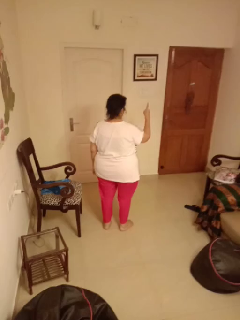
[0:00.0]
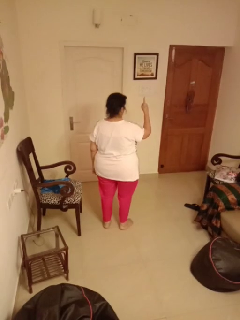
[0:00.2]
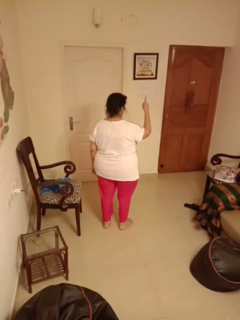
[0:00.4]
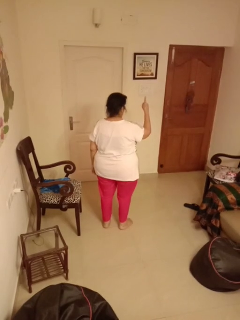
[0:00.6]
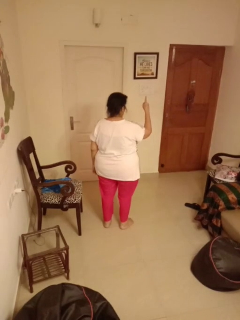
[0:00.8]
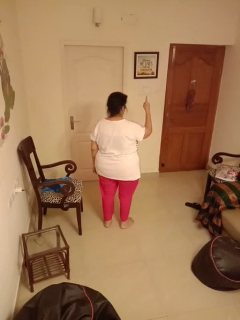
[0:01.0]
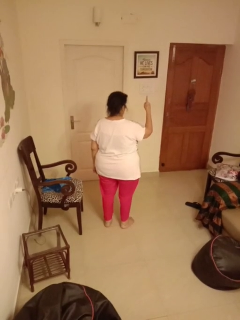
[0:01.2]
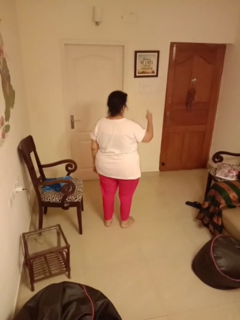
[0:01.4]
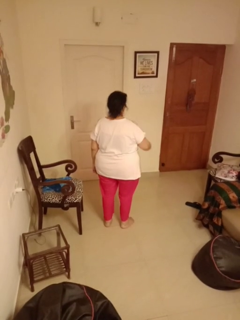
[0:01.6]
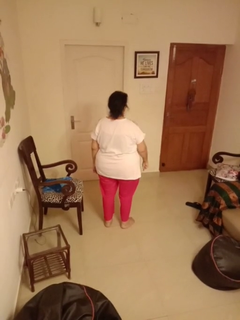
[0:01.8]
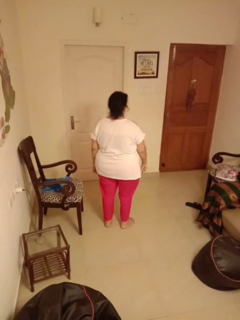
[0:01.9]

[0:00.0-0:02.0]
person gestures number one

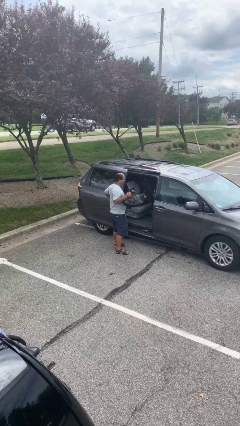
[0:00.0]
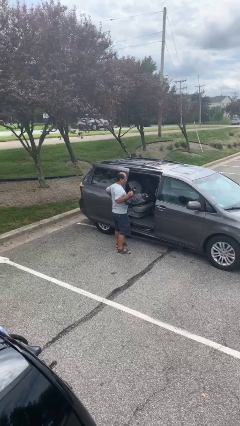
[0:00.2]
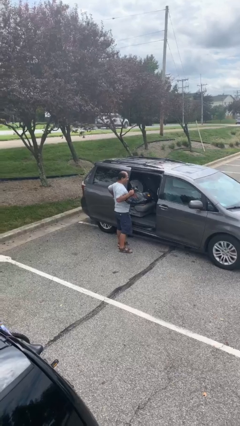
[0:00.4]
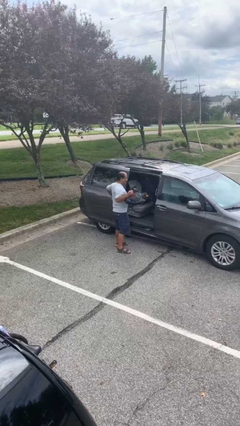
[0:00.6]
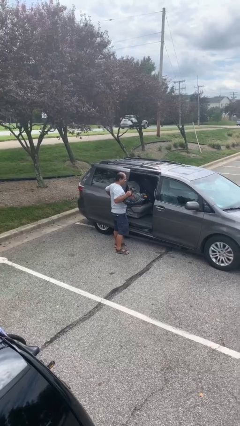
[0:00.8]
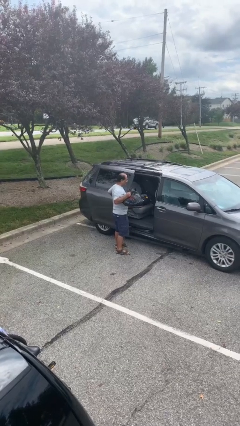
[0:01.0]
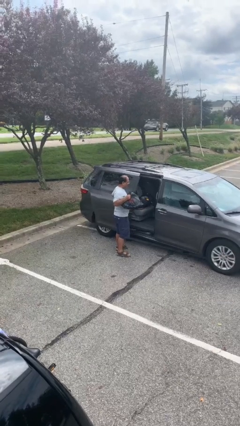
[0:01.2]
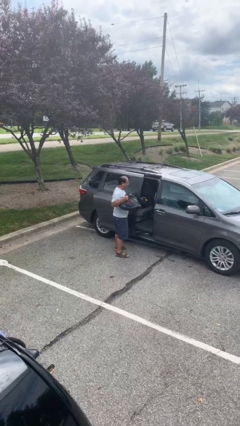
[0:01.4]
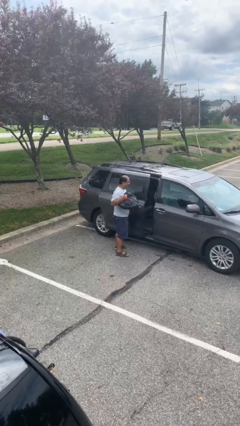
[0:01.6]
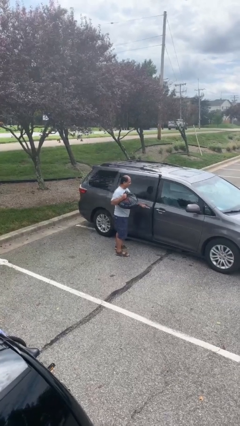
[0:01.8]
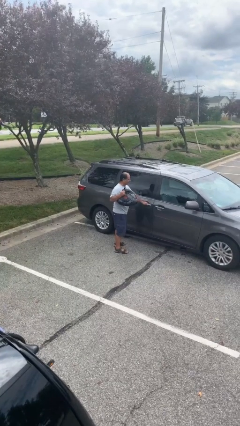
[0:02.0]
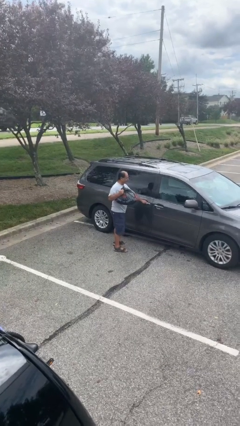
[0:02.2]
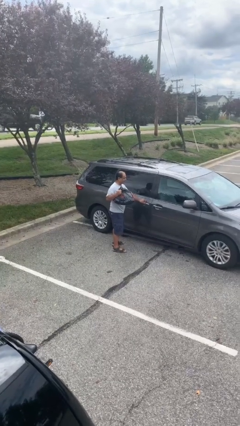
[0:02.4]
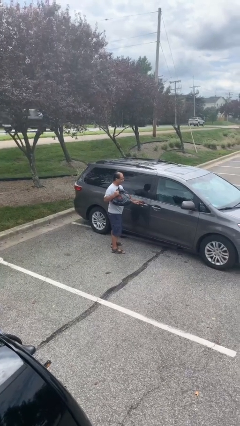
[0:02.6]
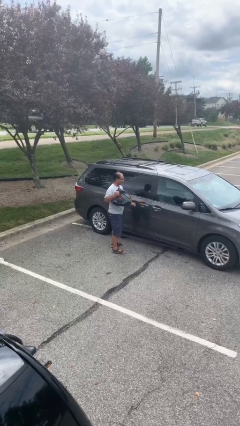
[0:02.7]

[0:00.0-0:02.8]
person closes car door

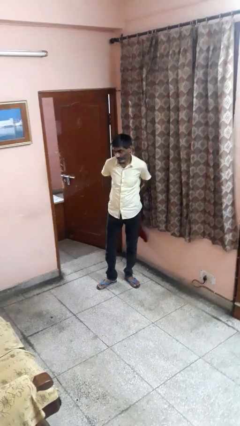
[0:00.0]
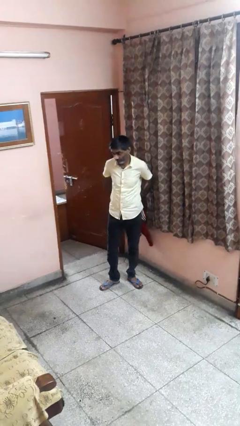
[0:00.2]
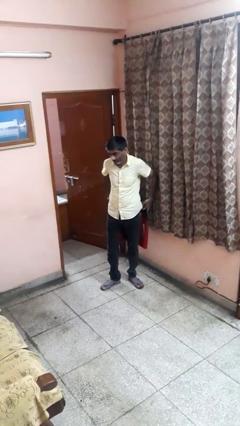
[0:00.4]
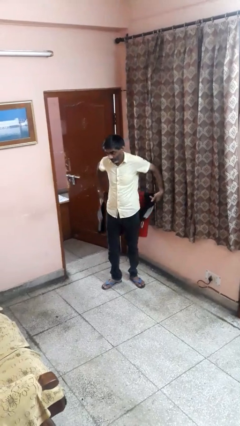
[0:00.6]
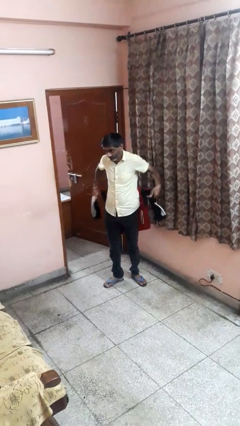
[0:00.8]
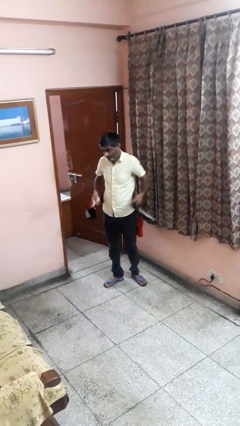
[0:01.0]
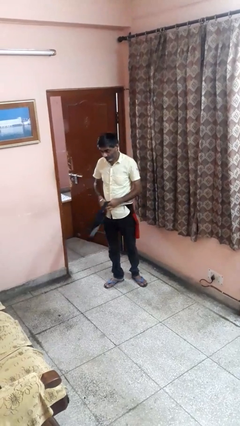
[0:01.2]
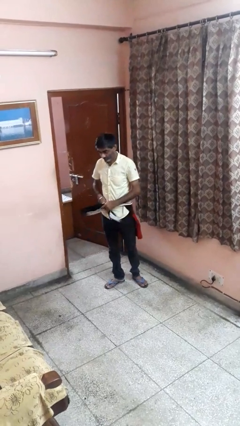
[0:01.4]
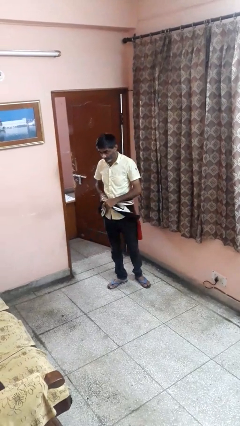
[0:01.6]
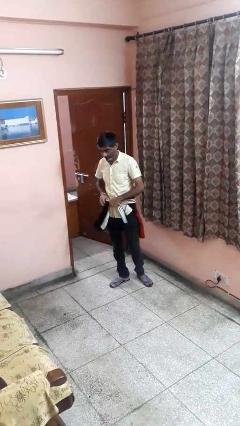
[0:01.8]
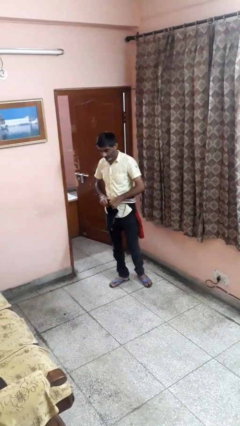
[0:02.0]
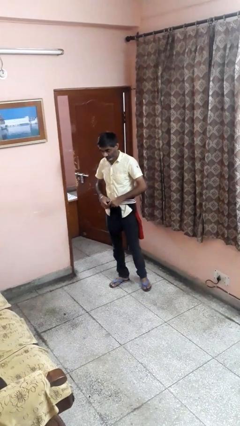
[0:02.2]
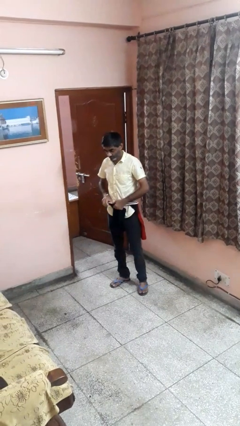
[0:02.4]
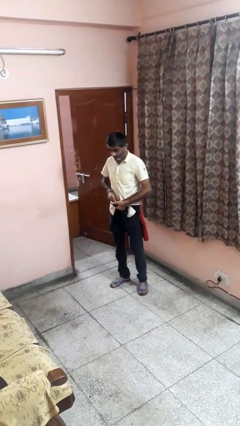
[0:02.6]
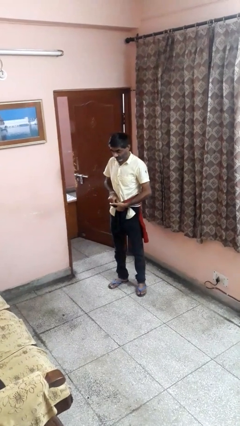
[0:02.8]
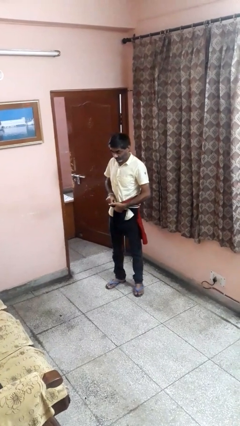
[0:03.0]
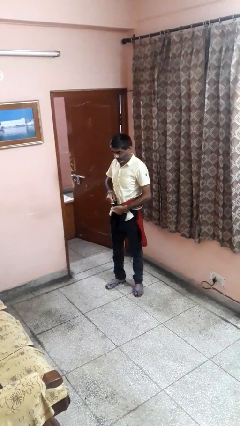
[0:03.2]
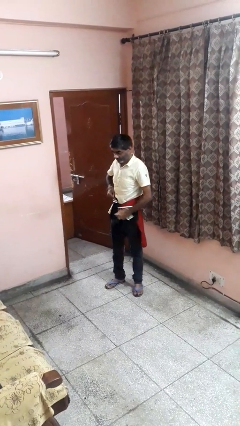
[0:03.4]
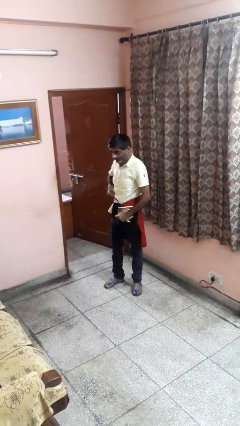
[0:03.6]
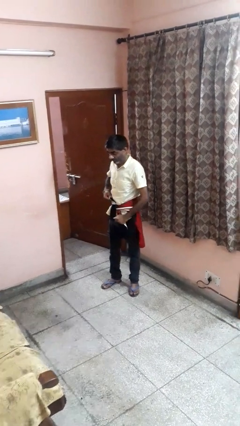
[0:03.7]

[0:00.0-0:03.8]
person ties jacket around waist

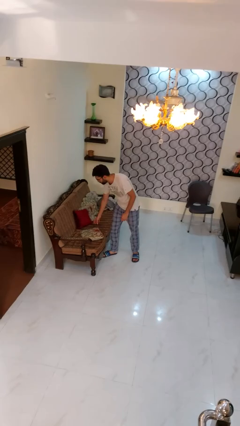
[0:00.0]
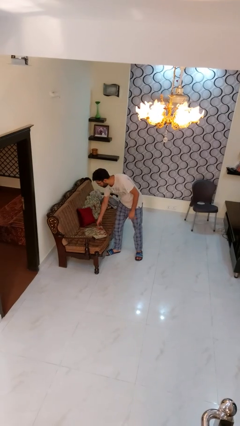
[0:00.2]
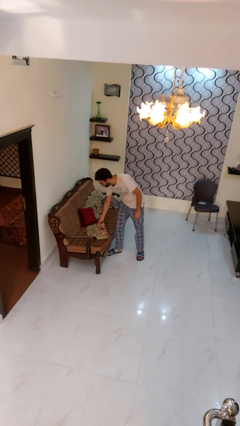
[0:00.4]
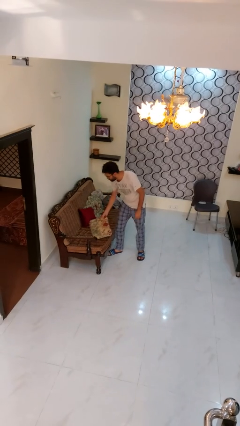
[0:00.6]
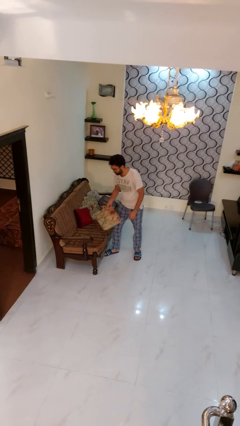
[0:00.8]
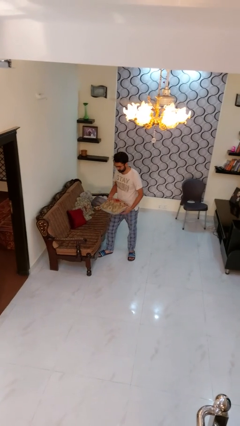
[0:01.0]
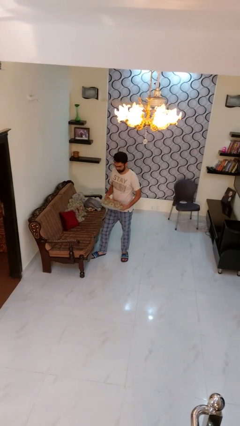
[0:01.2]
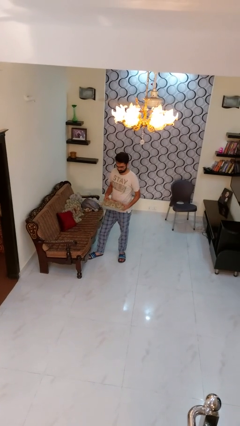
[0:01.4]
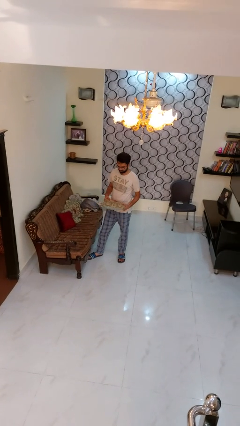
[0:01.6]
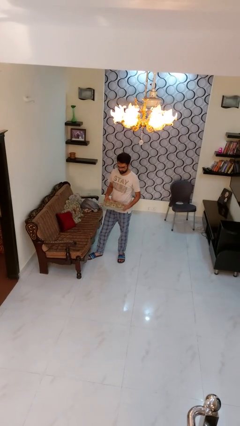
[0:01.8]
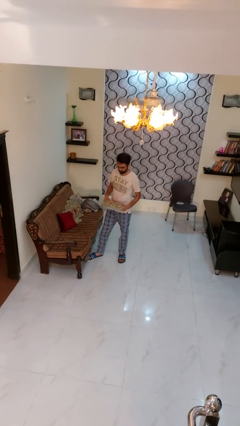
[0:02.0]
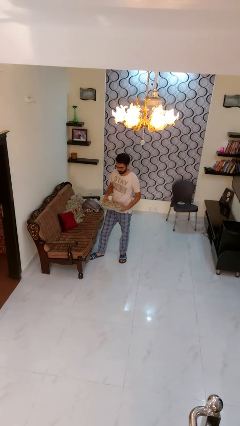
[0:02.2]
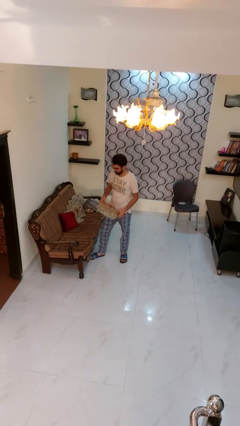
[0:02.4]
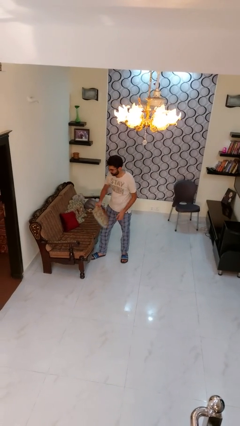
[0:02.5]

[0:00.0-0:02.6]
person picks up object from couch

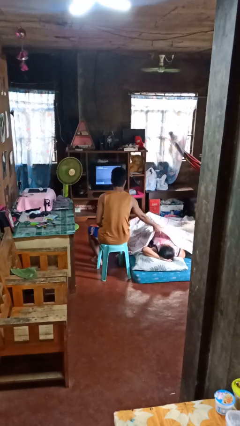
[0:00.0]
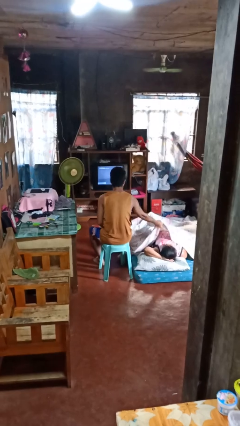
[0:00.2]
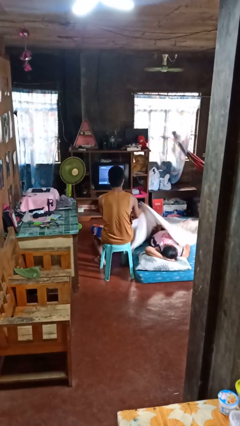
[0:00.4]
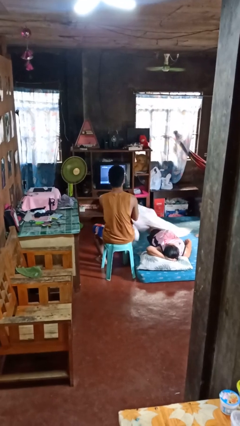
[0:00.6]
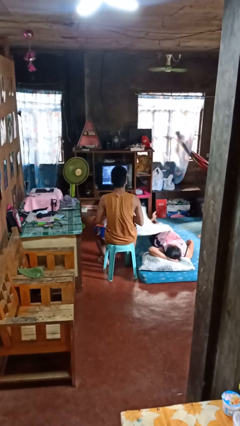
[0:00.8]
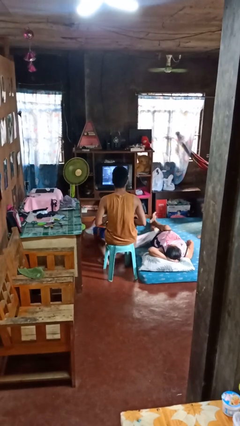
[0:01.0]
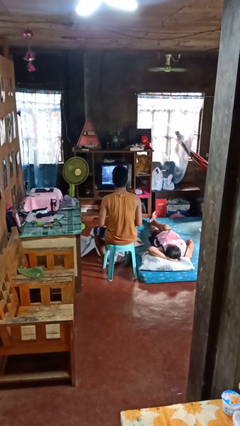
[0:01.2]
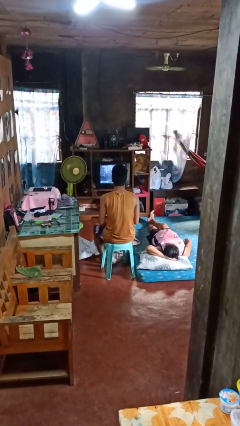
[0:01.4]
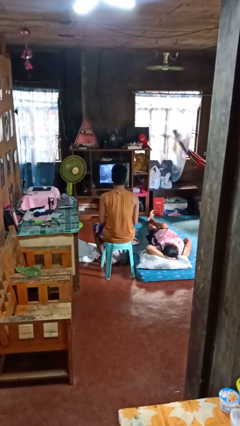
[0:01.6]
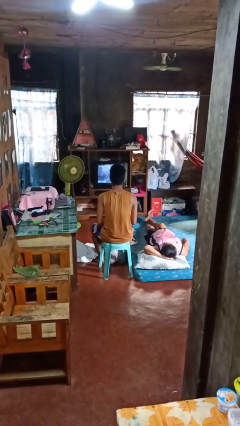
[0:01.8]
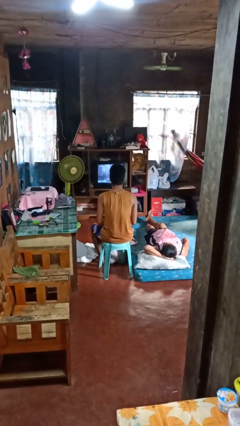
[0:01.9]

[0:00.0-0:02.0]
person uncovers friend with blanket

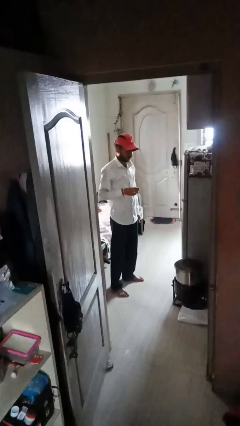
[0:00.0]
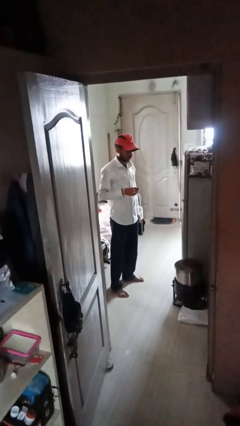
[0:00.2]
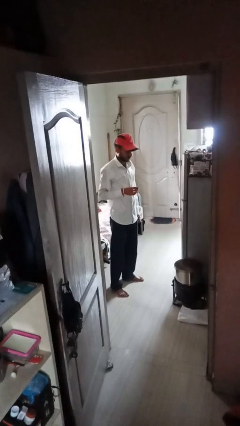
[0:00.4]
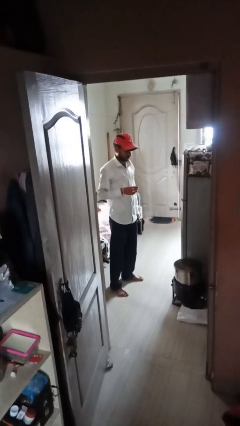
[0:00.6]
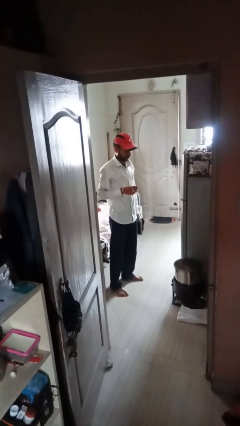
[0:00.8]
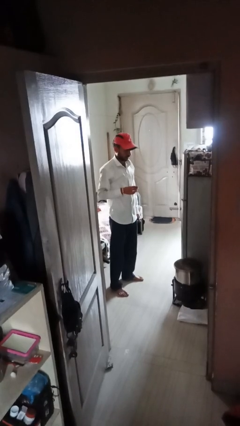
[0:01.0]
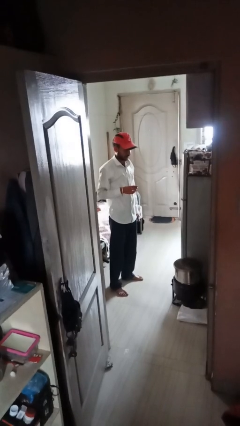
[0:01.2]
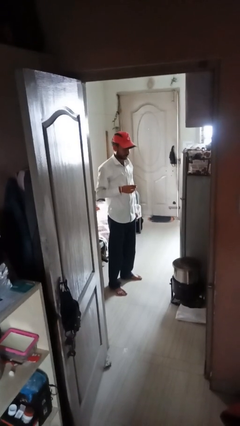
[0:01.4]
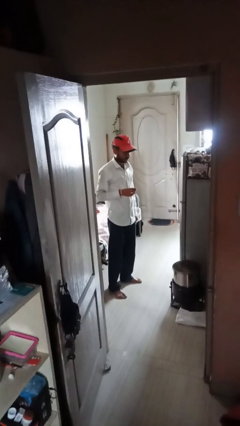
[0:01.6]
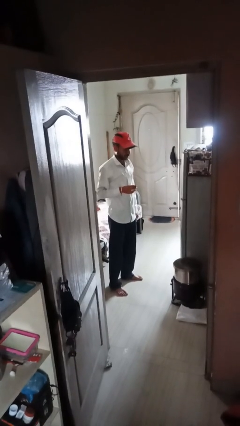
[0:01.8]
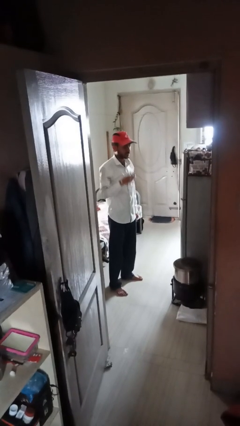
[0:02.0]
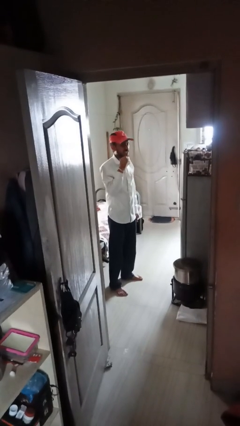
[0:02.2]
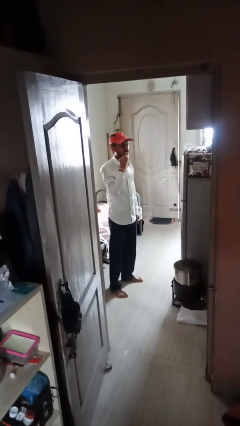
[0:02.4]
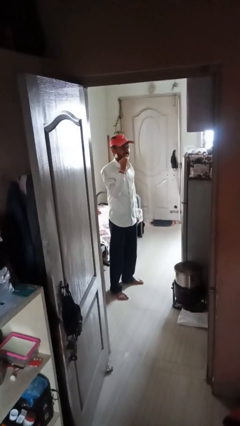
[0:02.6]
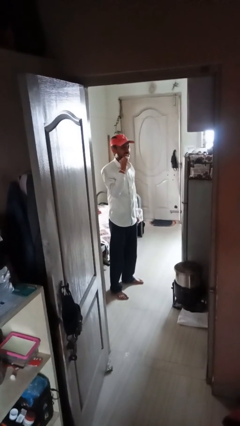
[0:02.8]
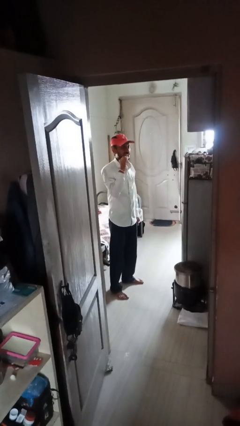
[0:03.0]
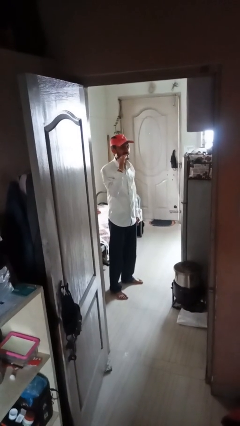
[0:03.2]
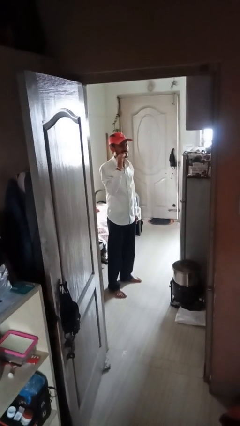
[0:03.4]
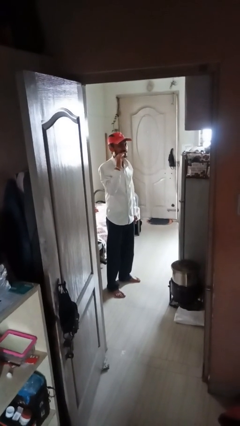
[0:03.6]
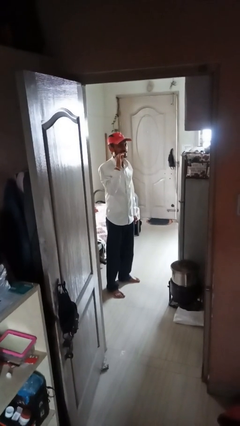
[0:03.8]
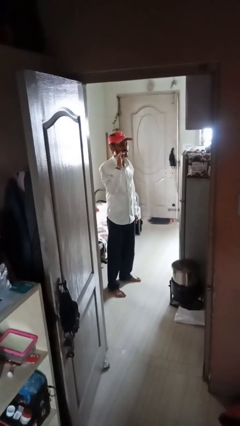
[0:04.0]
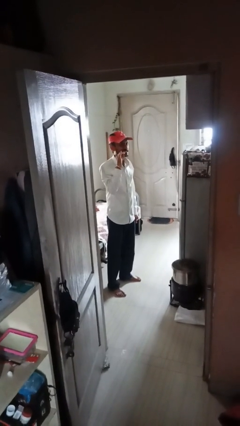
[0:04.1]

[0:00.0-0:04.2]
person flosses
